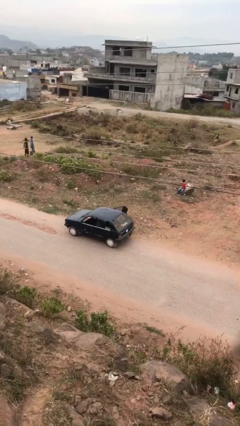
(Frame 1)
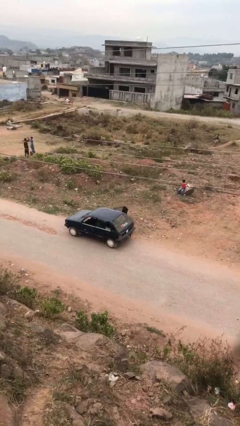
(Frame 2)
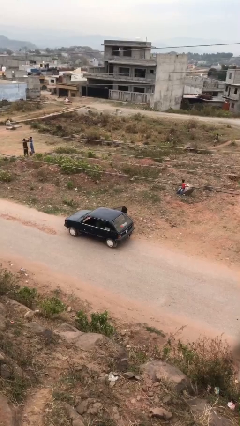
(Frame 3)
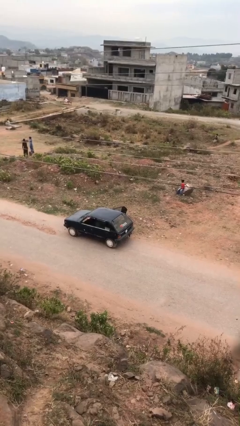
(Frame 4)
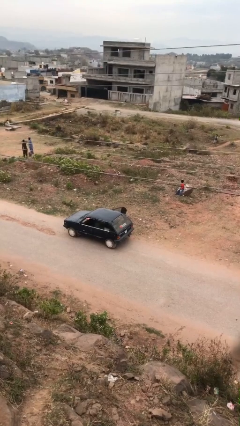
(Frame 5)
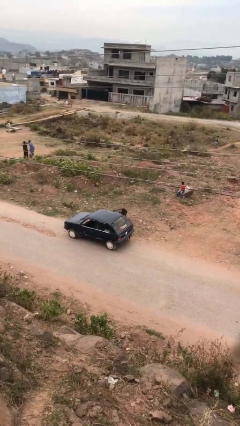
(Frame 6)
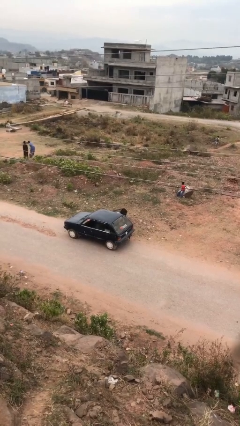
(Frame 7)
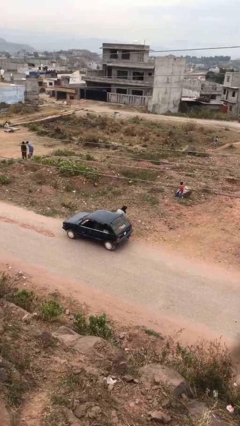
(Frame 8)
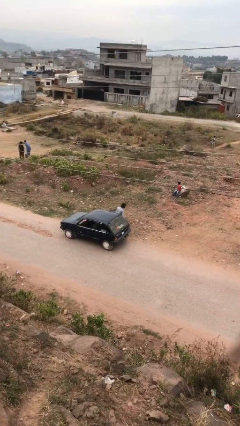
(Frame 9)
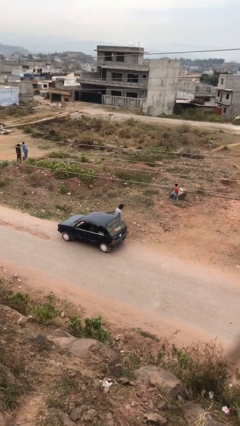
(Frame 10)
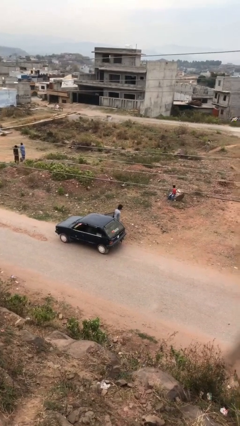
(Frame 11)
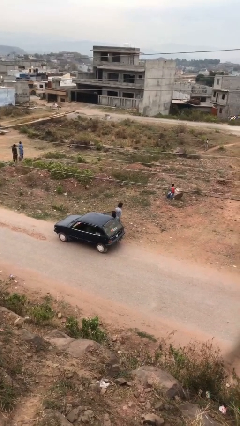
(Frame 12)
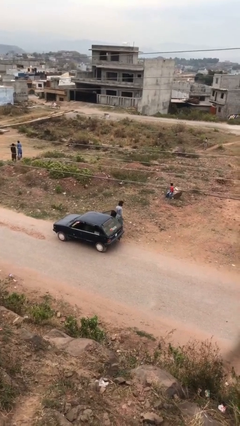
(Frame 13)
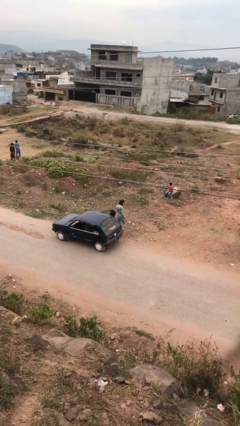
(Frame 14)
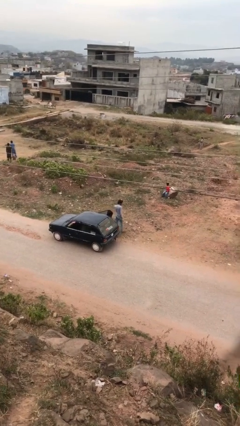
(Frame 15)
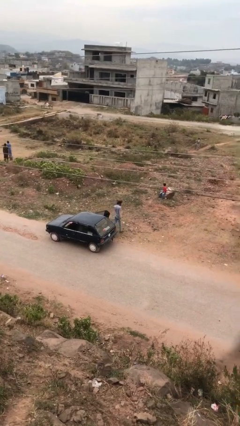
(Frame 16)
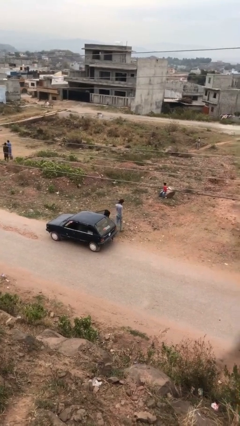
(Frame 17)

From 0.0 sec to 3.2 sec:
person exits car

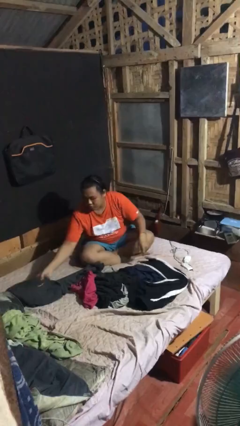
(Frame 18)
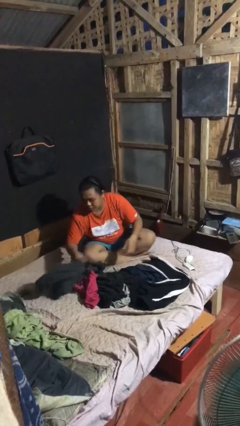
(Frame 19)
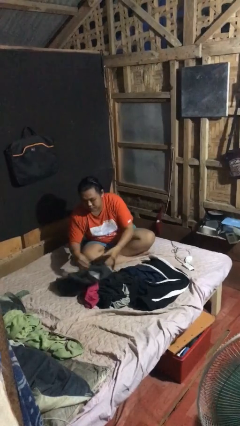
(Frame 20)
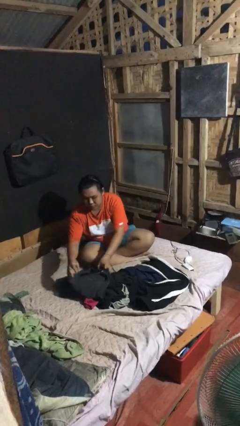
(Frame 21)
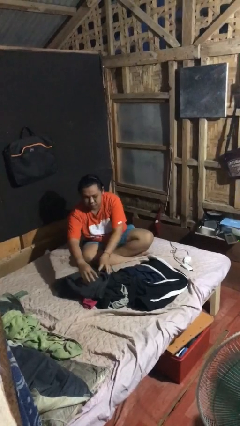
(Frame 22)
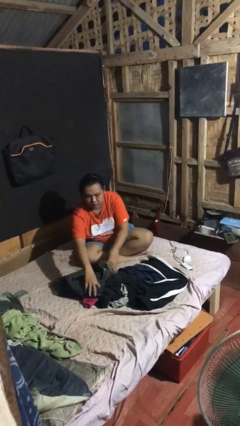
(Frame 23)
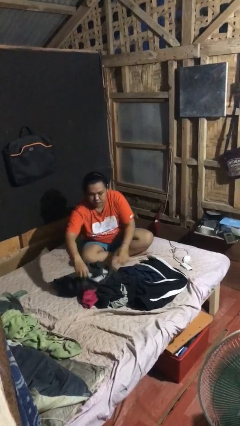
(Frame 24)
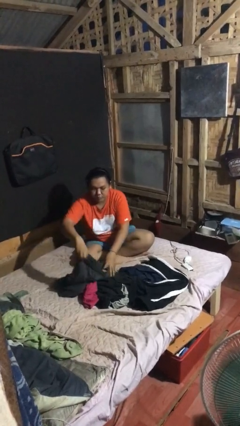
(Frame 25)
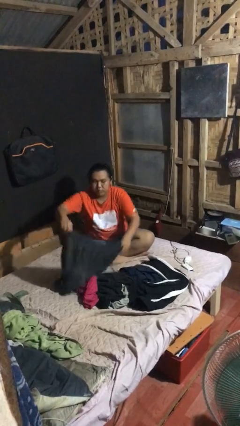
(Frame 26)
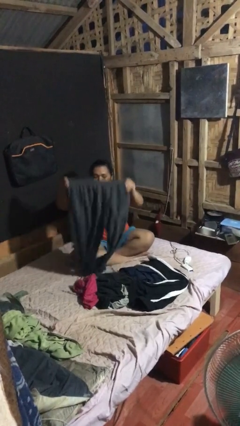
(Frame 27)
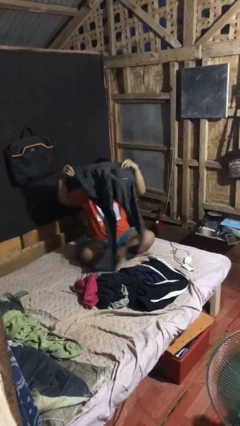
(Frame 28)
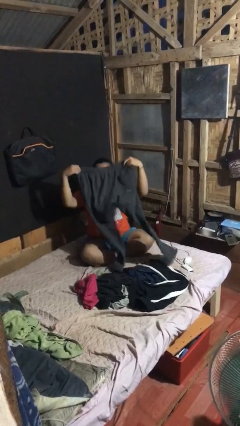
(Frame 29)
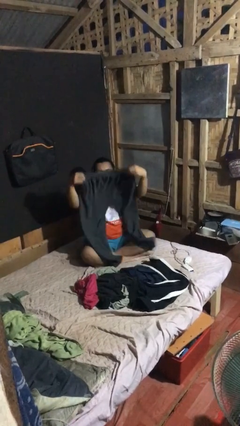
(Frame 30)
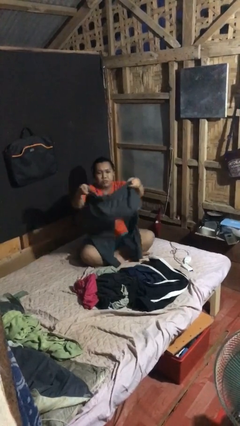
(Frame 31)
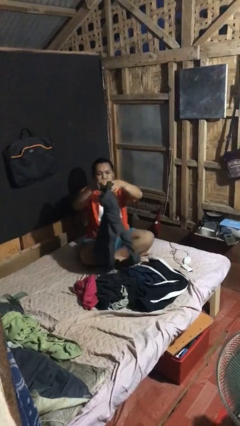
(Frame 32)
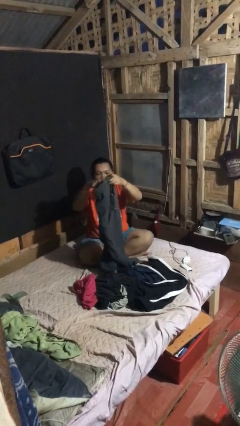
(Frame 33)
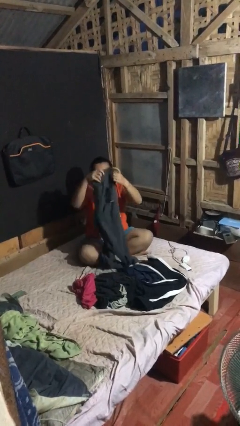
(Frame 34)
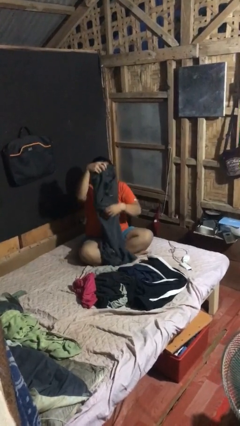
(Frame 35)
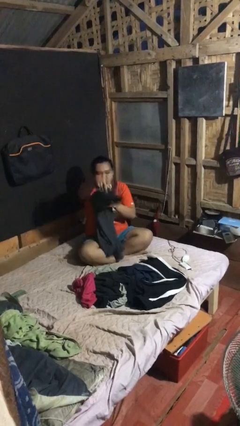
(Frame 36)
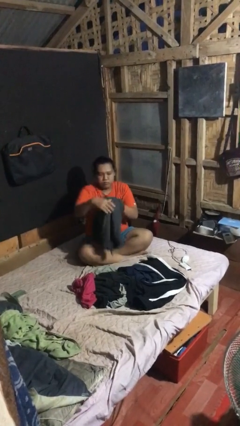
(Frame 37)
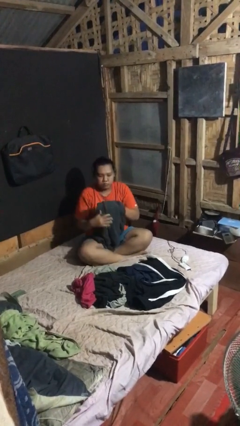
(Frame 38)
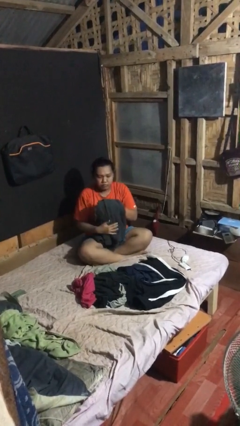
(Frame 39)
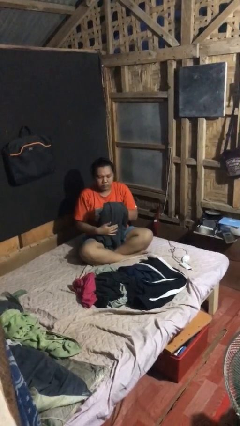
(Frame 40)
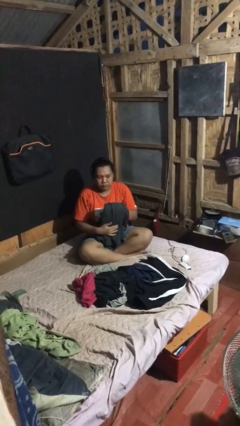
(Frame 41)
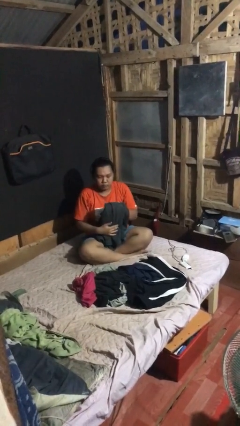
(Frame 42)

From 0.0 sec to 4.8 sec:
person folds pants

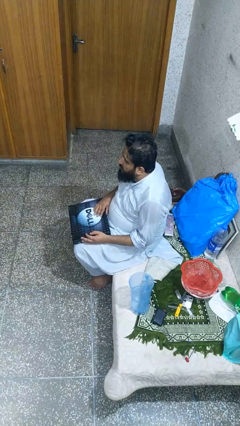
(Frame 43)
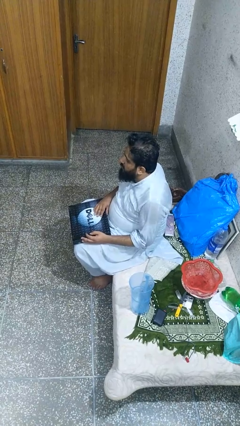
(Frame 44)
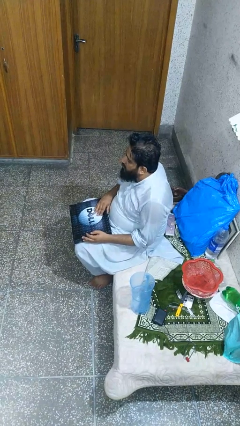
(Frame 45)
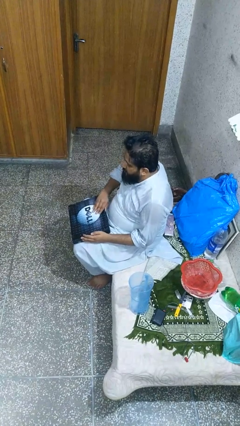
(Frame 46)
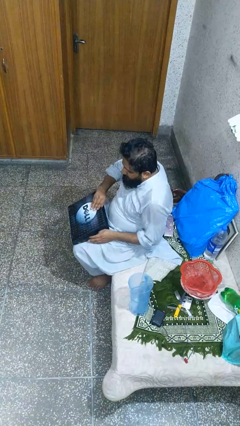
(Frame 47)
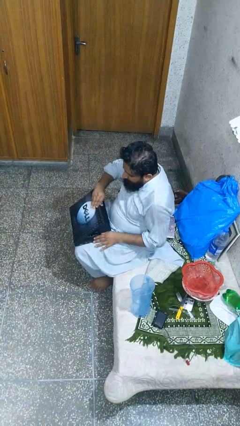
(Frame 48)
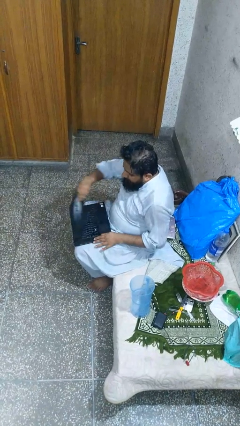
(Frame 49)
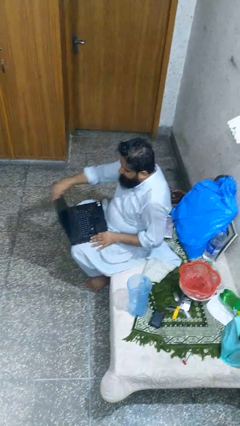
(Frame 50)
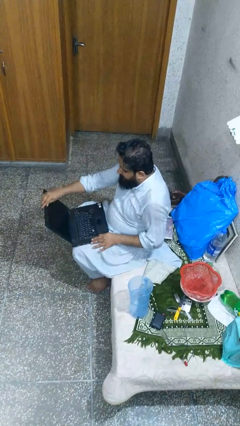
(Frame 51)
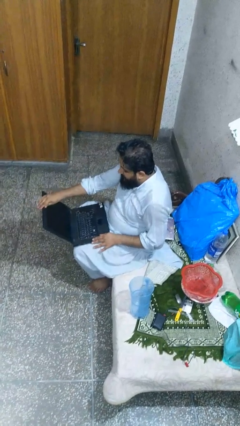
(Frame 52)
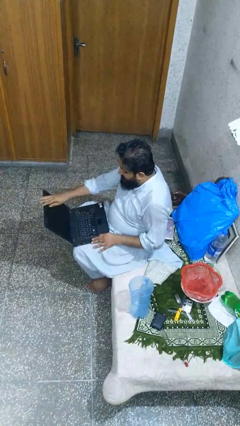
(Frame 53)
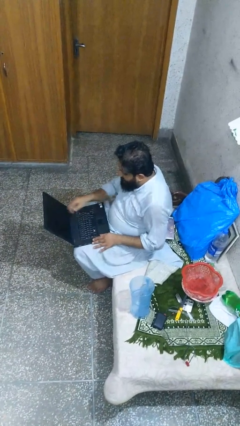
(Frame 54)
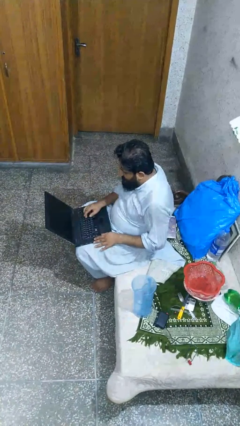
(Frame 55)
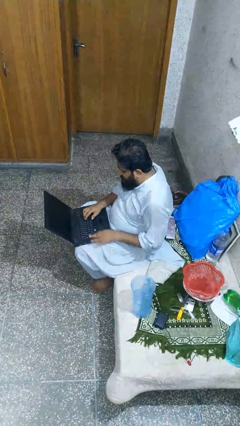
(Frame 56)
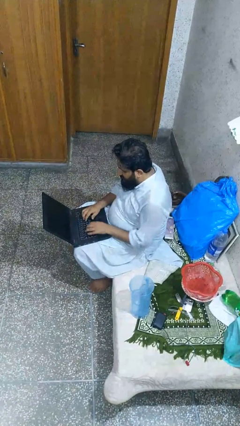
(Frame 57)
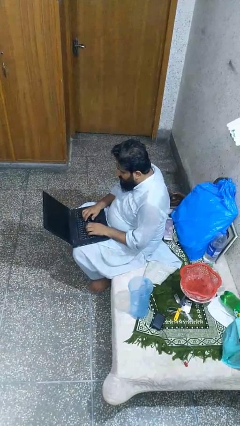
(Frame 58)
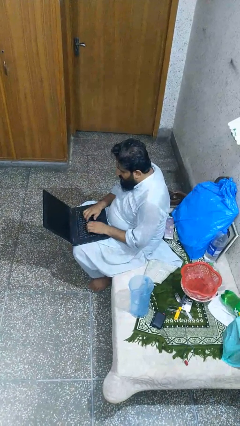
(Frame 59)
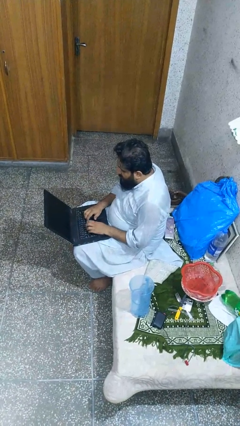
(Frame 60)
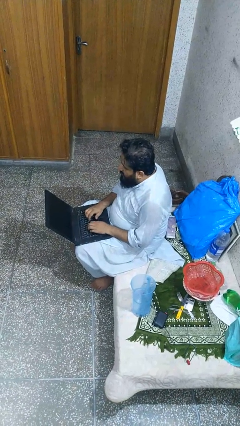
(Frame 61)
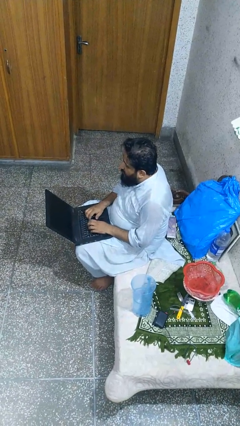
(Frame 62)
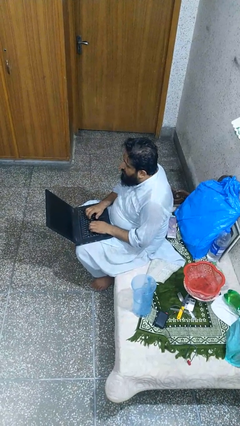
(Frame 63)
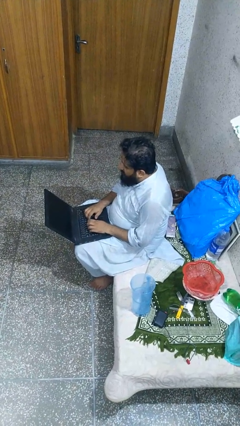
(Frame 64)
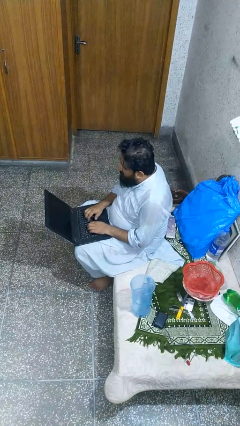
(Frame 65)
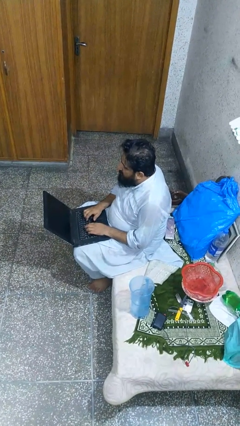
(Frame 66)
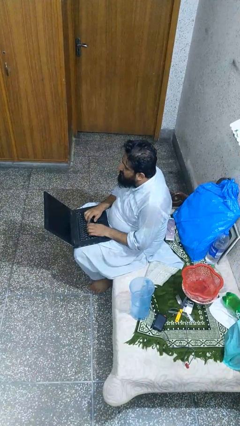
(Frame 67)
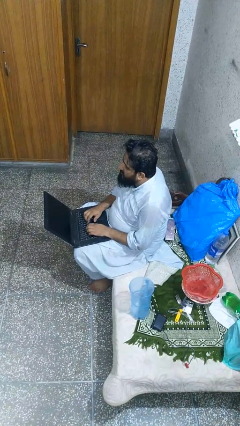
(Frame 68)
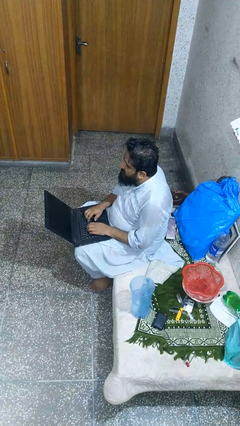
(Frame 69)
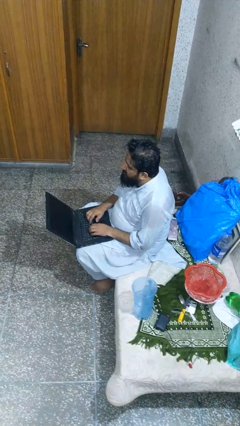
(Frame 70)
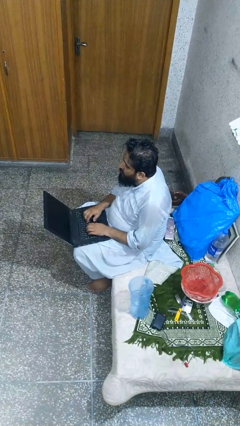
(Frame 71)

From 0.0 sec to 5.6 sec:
person opens laptop

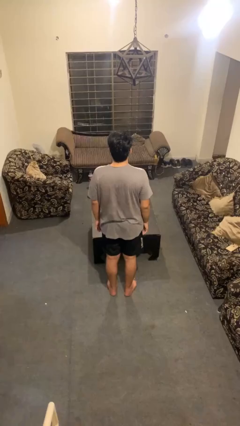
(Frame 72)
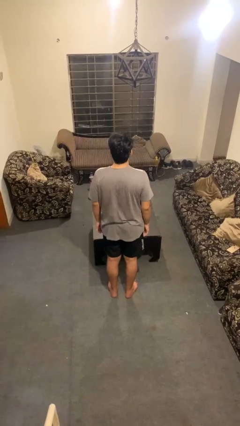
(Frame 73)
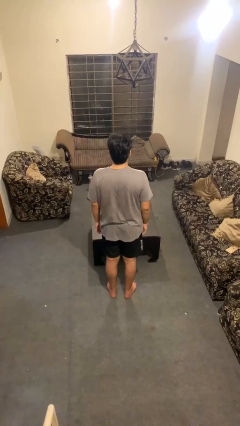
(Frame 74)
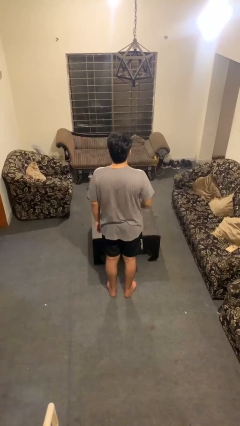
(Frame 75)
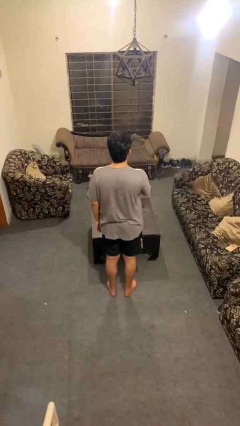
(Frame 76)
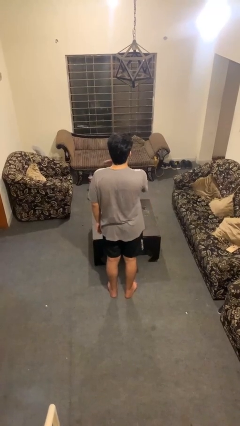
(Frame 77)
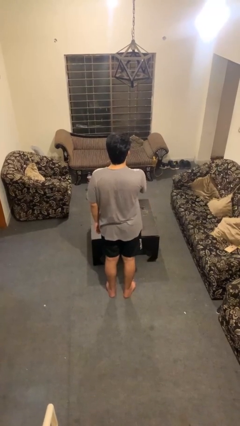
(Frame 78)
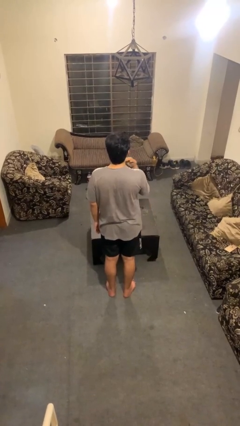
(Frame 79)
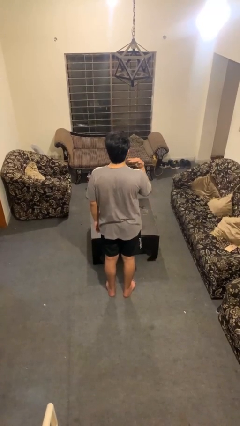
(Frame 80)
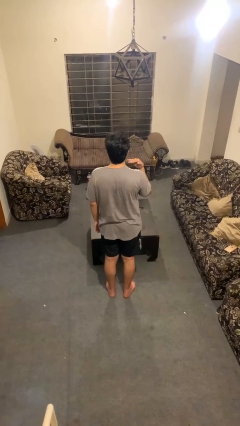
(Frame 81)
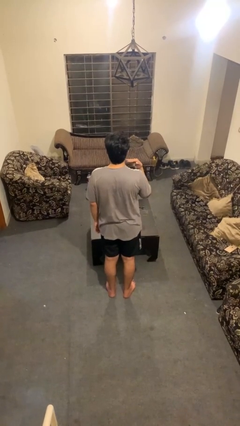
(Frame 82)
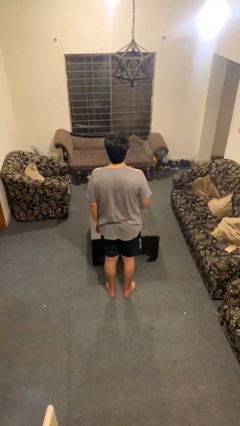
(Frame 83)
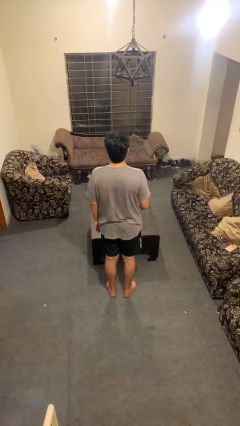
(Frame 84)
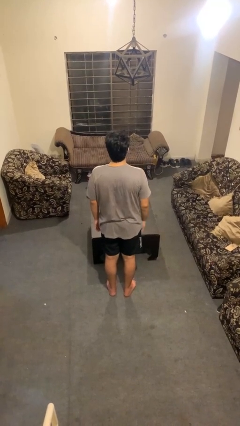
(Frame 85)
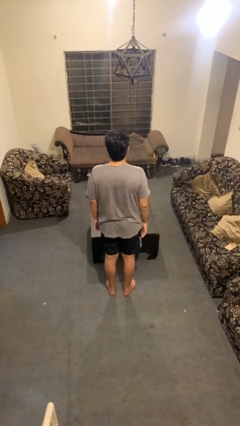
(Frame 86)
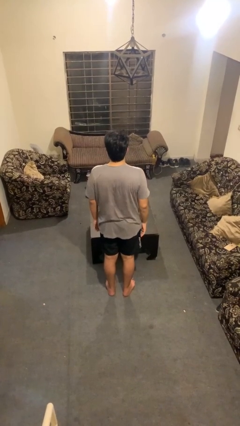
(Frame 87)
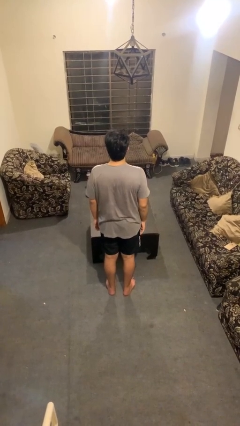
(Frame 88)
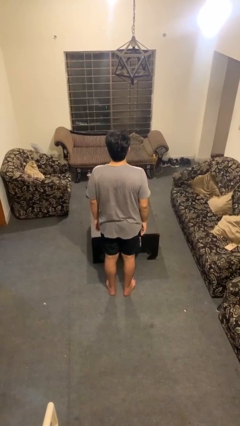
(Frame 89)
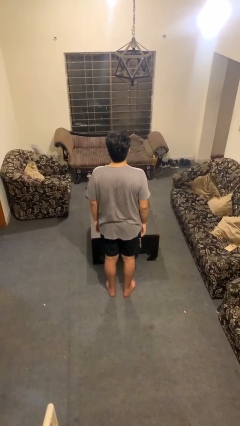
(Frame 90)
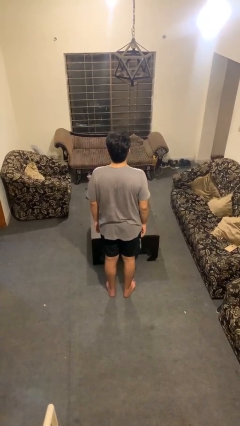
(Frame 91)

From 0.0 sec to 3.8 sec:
person gestures cut

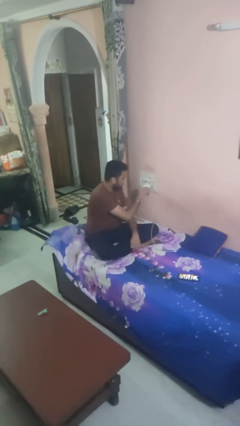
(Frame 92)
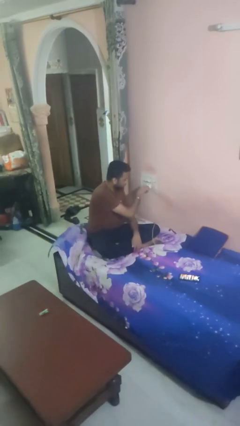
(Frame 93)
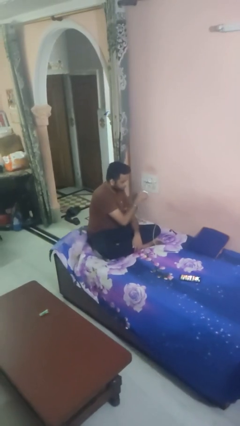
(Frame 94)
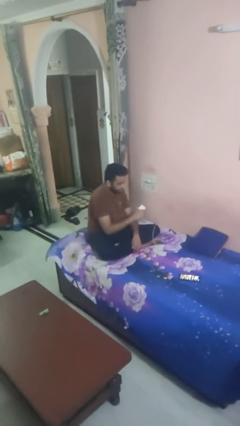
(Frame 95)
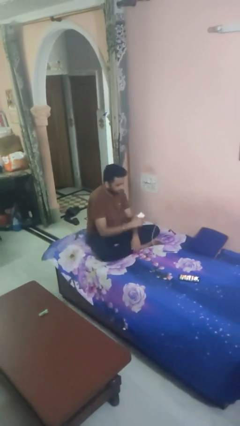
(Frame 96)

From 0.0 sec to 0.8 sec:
person unplugs from electrical socket
